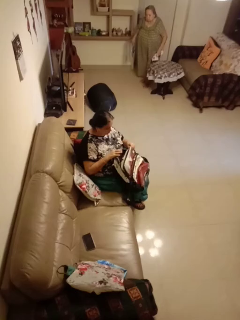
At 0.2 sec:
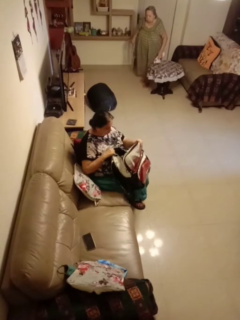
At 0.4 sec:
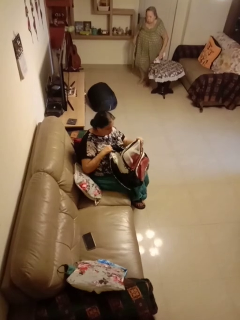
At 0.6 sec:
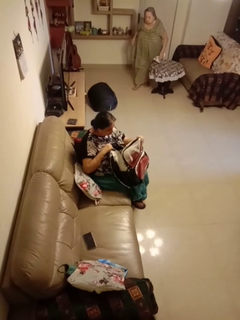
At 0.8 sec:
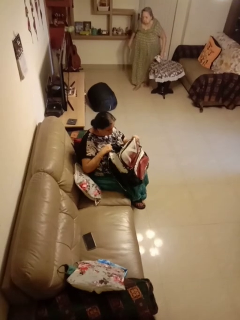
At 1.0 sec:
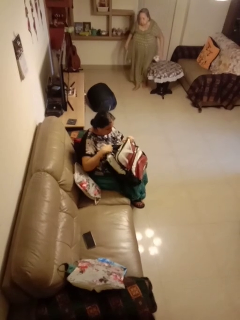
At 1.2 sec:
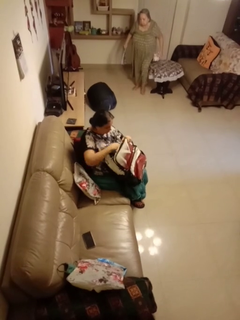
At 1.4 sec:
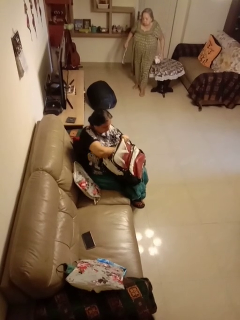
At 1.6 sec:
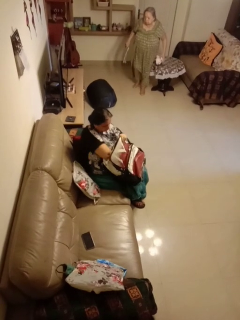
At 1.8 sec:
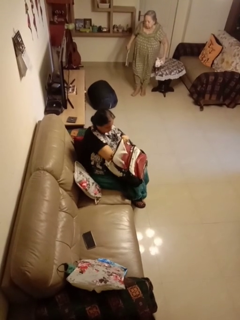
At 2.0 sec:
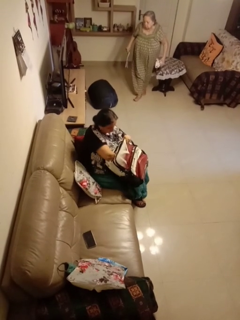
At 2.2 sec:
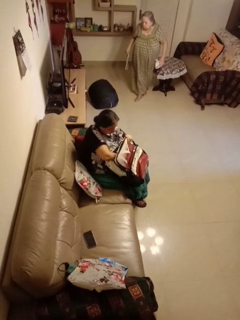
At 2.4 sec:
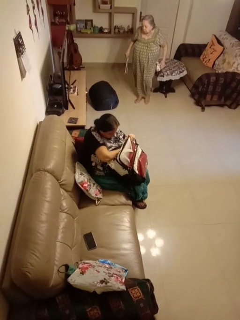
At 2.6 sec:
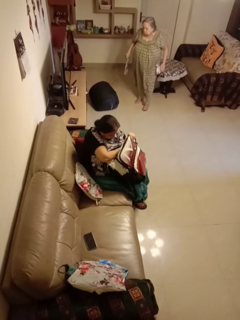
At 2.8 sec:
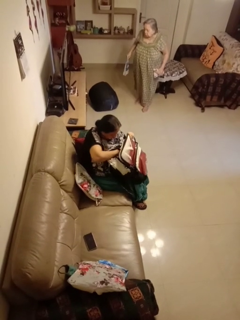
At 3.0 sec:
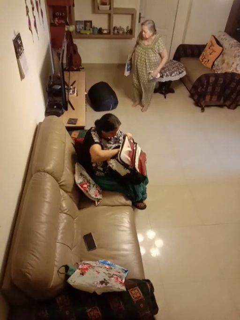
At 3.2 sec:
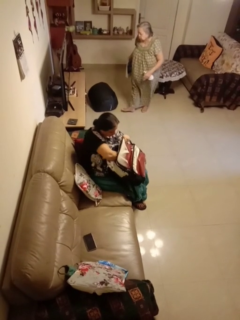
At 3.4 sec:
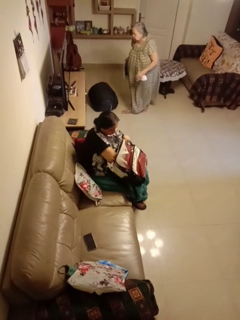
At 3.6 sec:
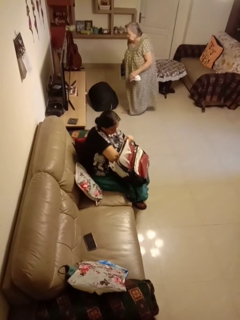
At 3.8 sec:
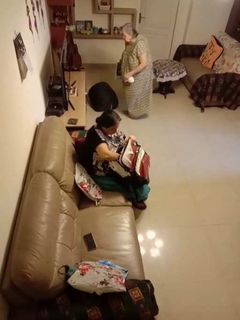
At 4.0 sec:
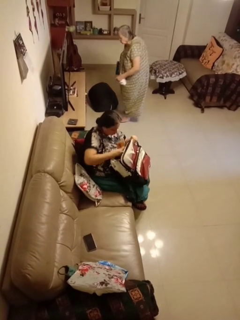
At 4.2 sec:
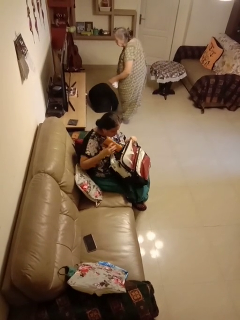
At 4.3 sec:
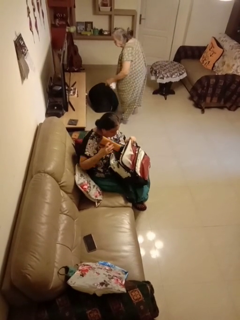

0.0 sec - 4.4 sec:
person searches in backpack

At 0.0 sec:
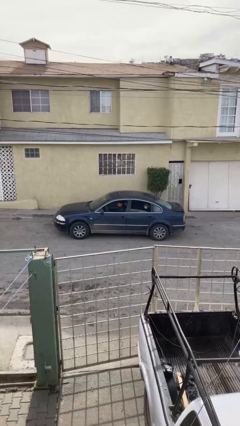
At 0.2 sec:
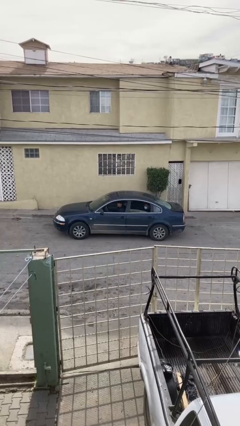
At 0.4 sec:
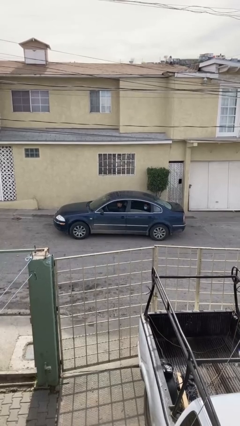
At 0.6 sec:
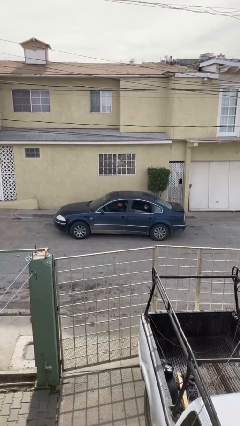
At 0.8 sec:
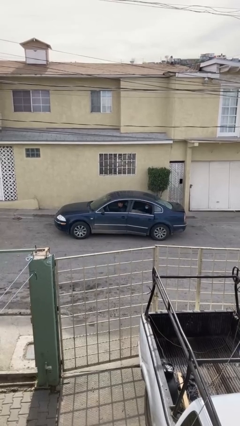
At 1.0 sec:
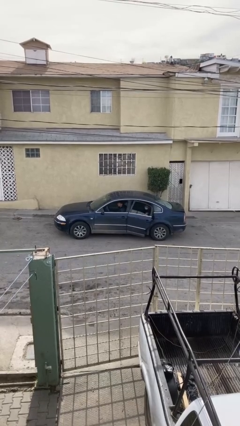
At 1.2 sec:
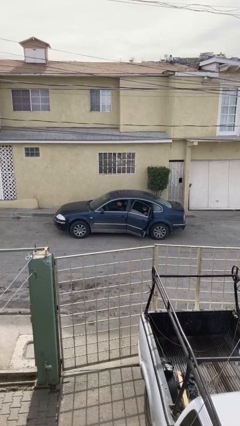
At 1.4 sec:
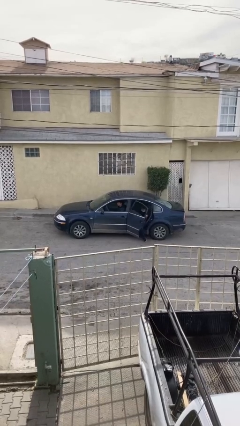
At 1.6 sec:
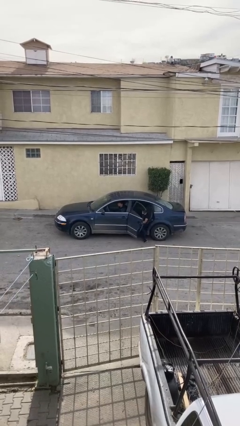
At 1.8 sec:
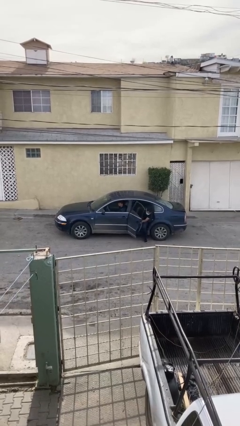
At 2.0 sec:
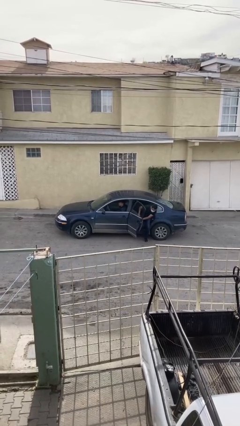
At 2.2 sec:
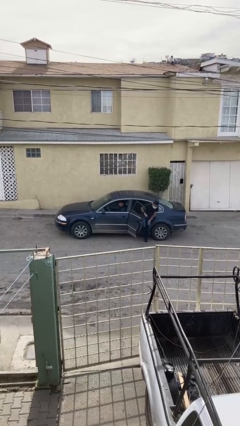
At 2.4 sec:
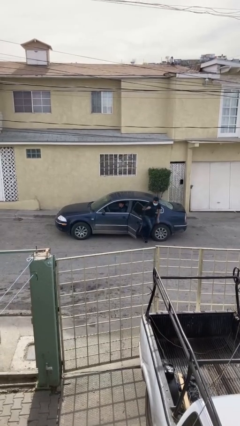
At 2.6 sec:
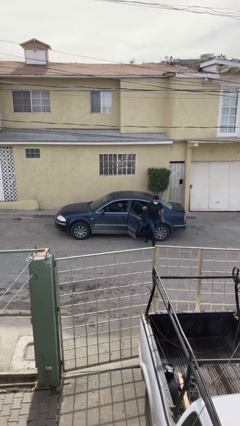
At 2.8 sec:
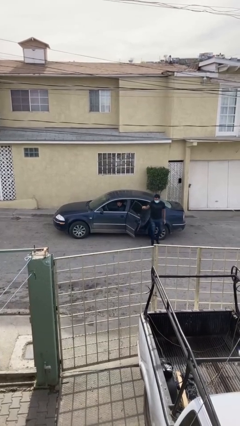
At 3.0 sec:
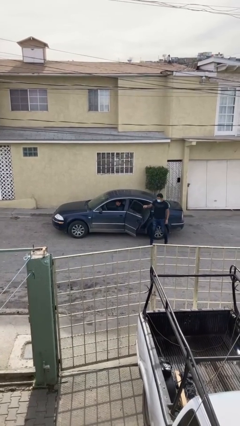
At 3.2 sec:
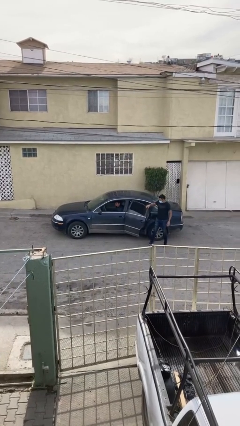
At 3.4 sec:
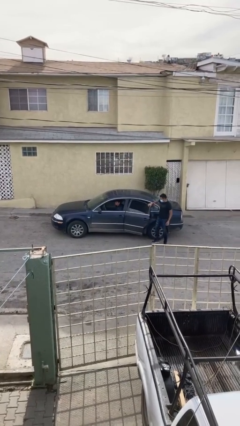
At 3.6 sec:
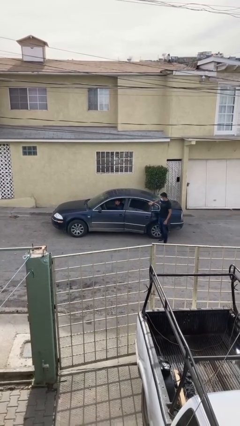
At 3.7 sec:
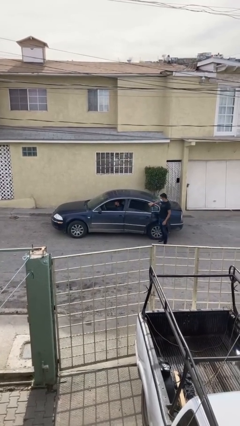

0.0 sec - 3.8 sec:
car drops off person

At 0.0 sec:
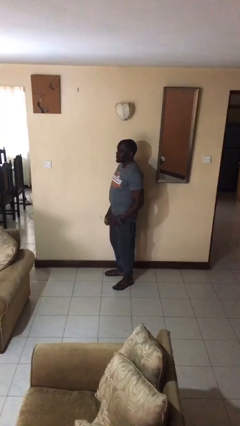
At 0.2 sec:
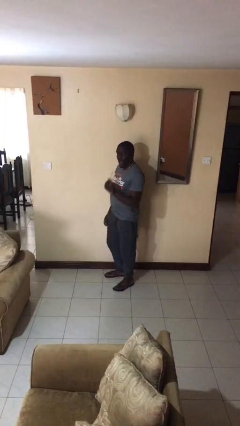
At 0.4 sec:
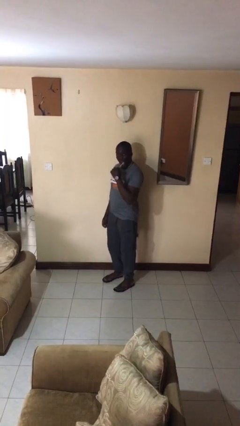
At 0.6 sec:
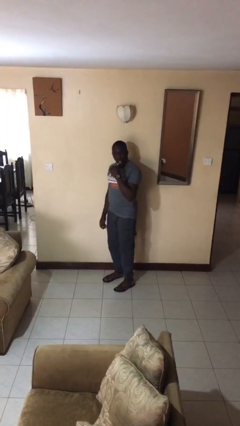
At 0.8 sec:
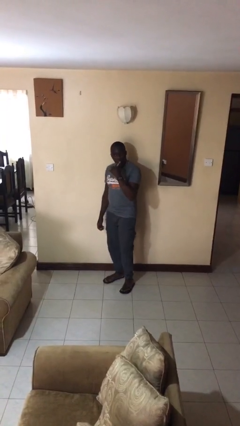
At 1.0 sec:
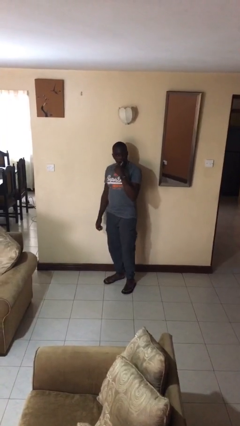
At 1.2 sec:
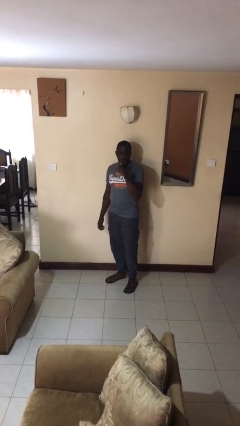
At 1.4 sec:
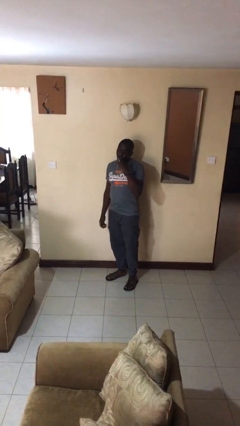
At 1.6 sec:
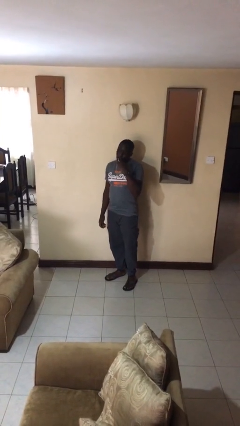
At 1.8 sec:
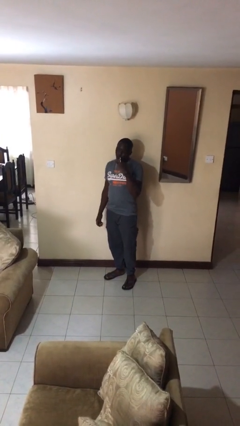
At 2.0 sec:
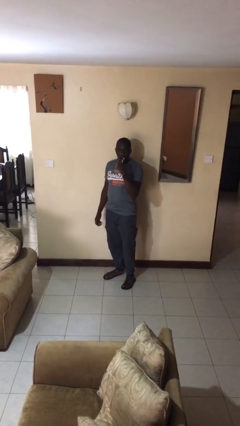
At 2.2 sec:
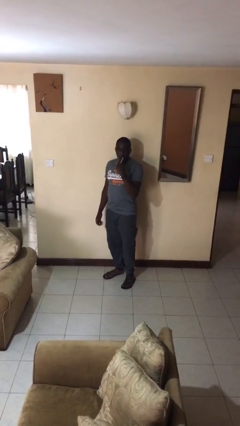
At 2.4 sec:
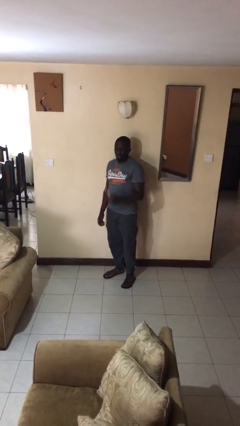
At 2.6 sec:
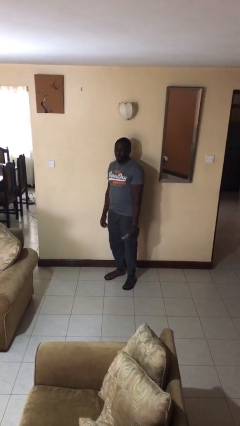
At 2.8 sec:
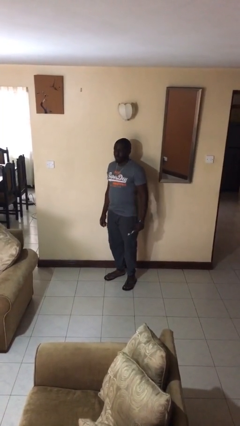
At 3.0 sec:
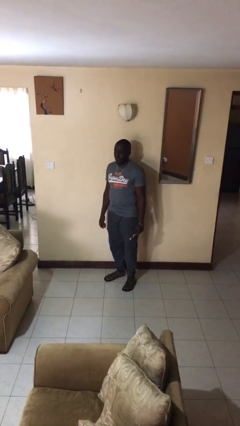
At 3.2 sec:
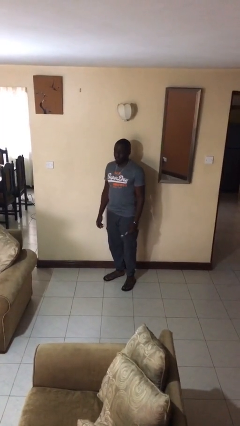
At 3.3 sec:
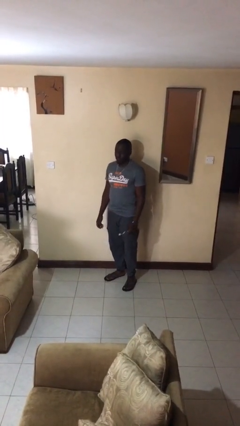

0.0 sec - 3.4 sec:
person brushes teeth

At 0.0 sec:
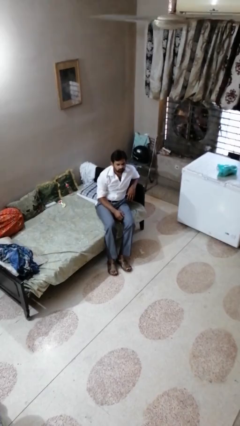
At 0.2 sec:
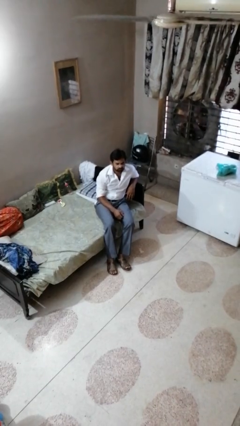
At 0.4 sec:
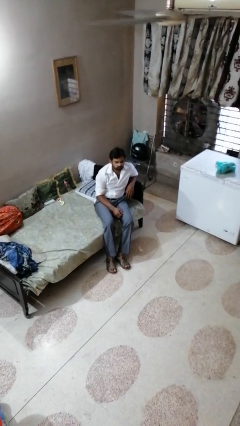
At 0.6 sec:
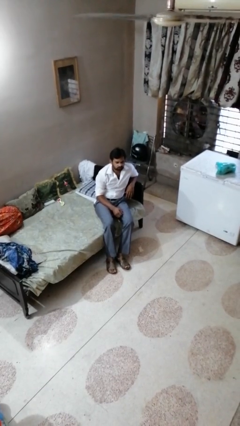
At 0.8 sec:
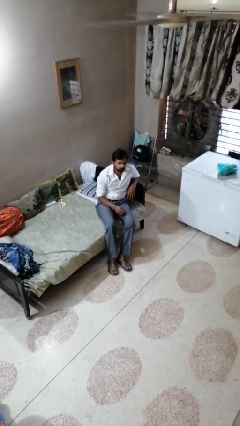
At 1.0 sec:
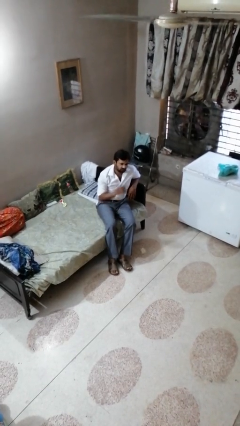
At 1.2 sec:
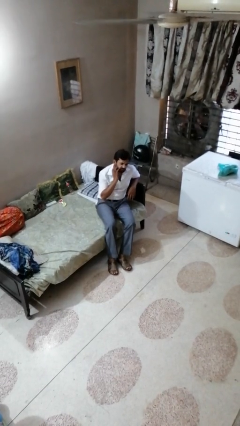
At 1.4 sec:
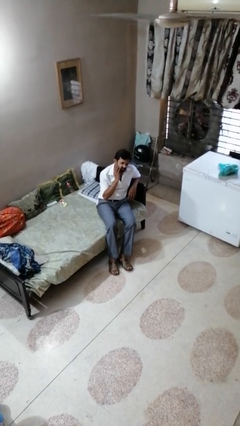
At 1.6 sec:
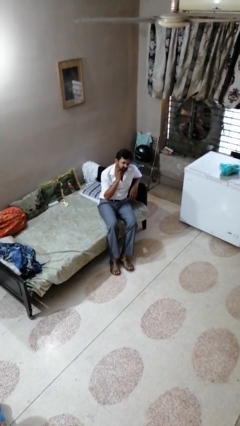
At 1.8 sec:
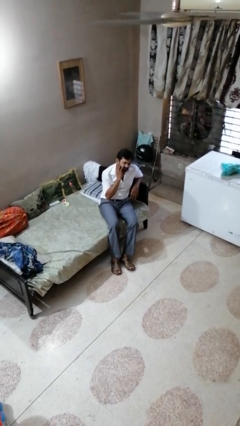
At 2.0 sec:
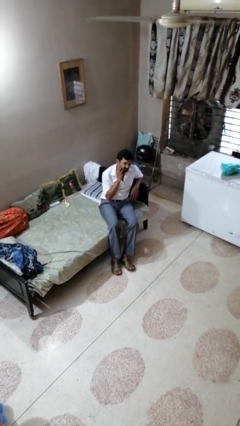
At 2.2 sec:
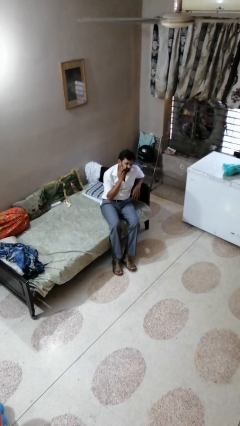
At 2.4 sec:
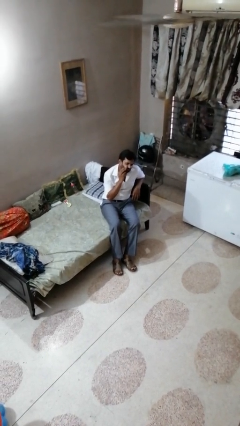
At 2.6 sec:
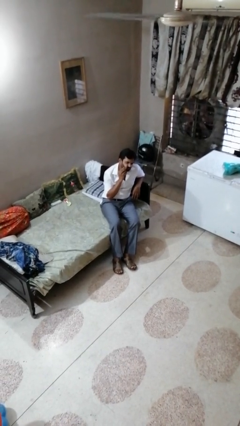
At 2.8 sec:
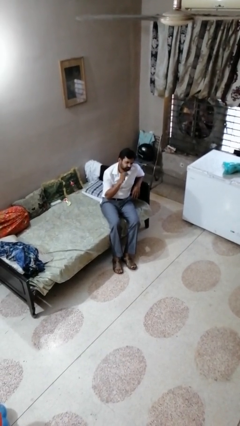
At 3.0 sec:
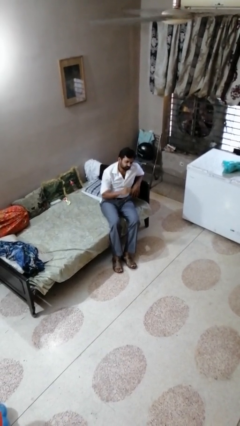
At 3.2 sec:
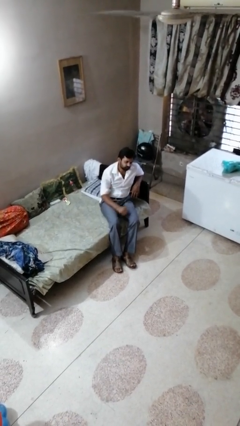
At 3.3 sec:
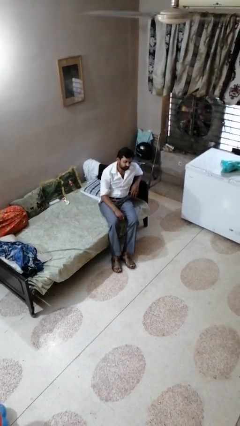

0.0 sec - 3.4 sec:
person scratches face

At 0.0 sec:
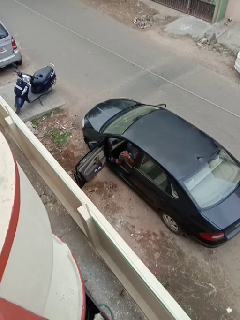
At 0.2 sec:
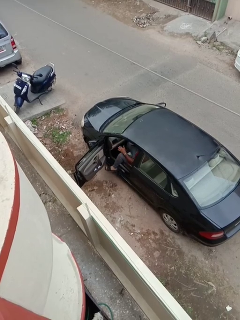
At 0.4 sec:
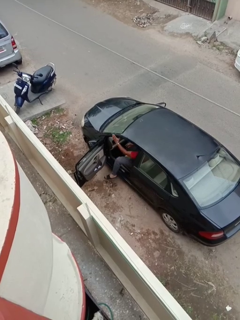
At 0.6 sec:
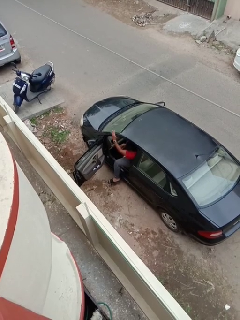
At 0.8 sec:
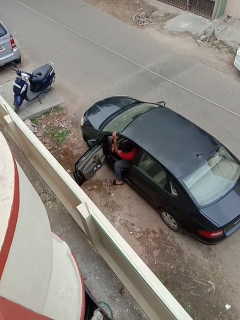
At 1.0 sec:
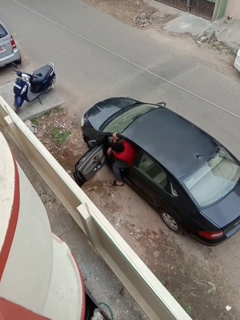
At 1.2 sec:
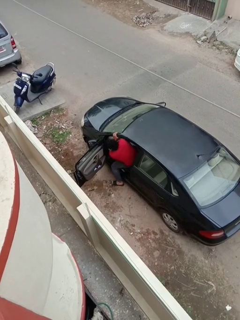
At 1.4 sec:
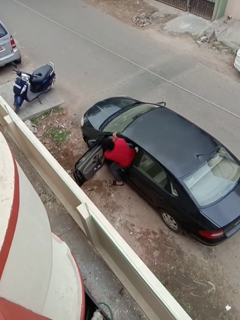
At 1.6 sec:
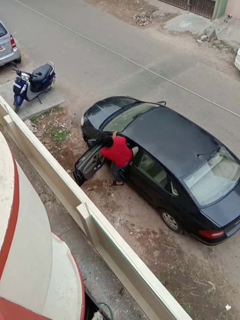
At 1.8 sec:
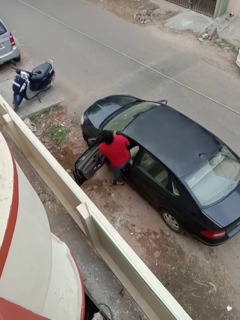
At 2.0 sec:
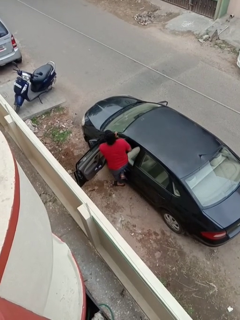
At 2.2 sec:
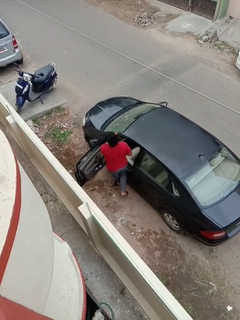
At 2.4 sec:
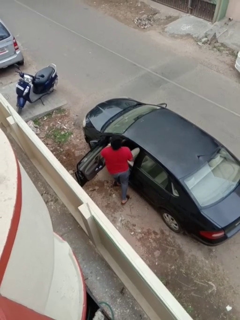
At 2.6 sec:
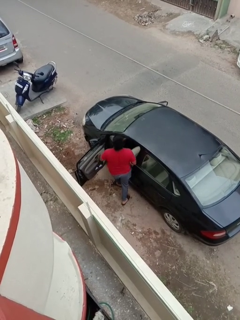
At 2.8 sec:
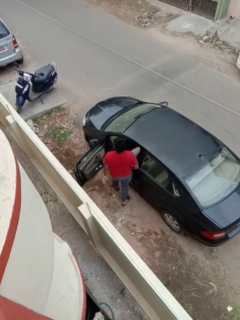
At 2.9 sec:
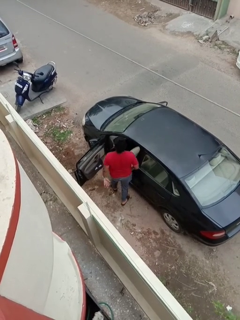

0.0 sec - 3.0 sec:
person exits car

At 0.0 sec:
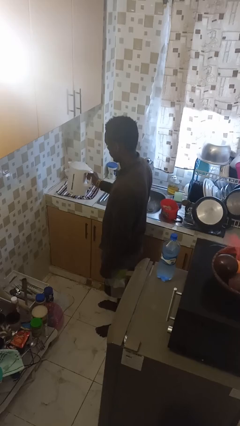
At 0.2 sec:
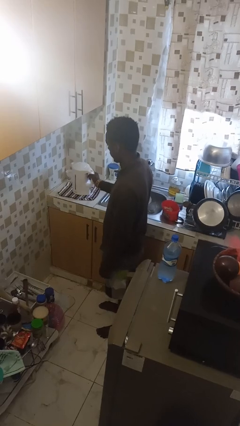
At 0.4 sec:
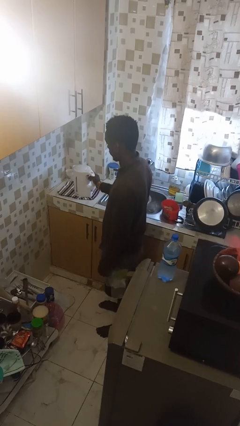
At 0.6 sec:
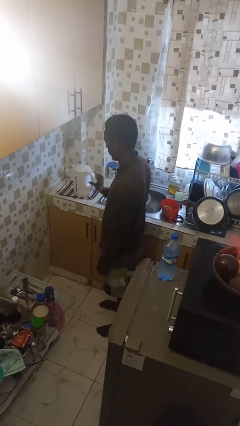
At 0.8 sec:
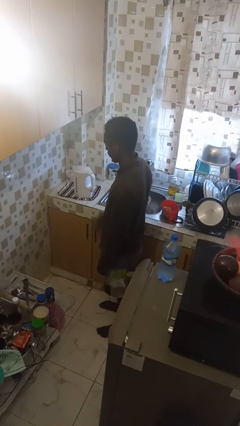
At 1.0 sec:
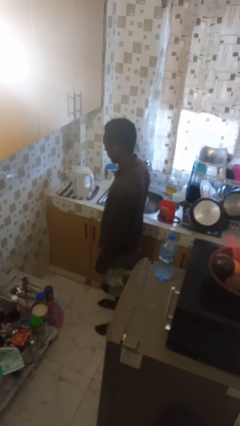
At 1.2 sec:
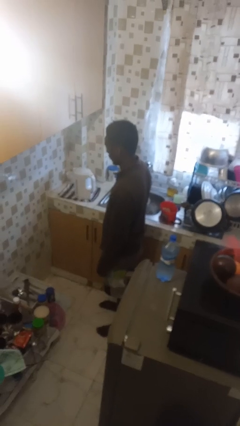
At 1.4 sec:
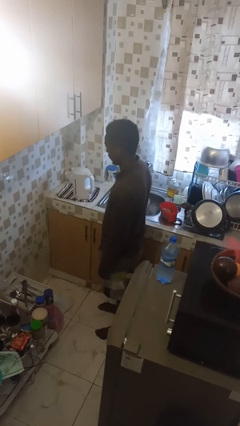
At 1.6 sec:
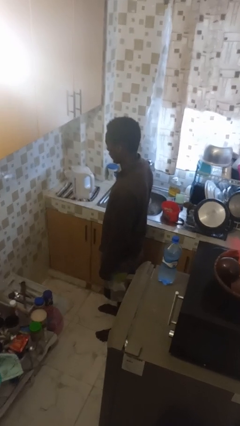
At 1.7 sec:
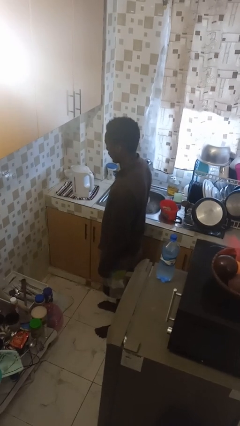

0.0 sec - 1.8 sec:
person puts down object on countertop
